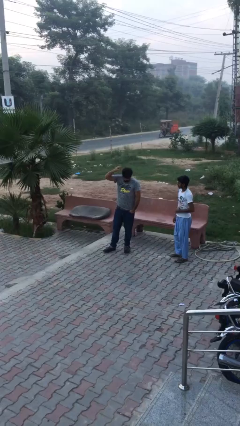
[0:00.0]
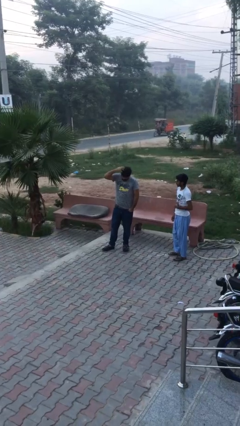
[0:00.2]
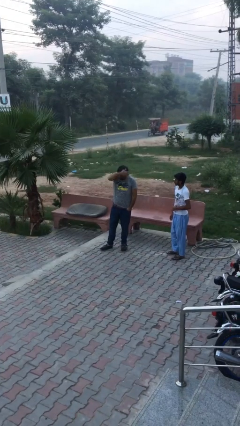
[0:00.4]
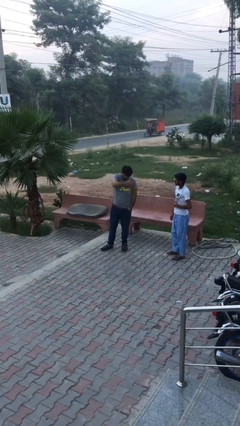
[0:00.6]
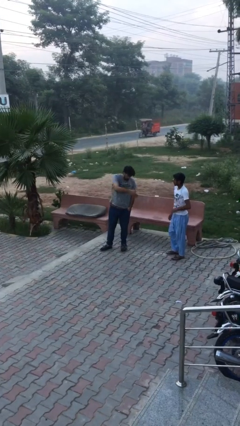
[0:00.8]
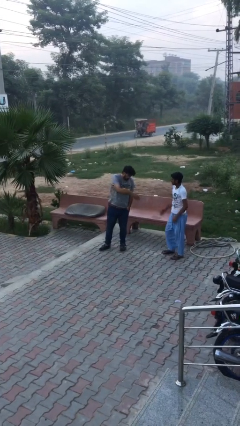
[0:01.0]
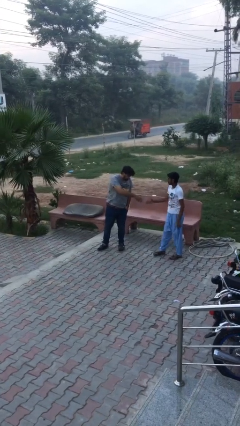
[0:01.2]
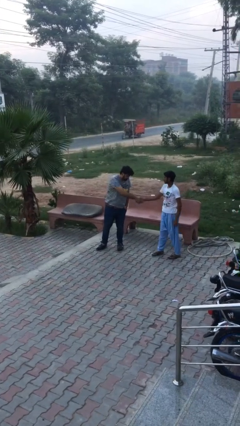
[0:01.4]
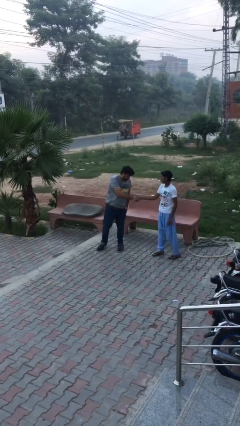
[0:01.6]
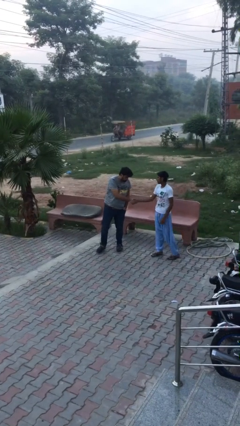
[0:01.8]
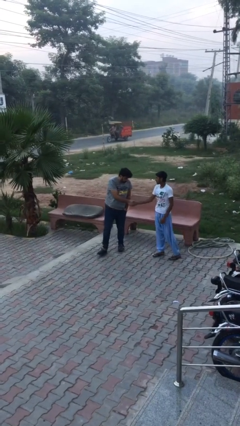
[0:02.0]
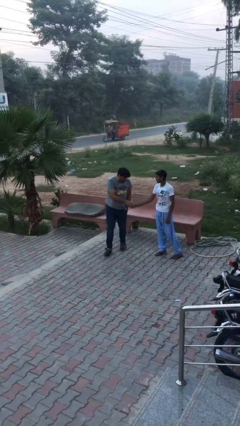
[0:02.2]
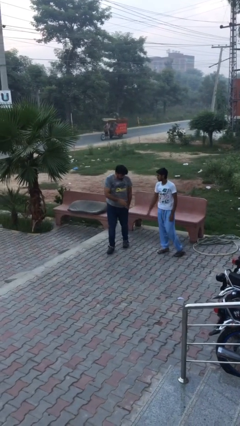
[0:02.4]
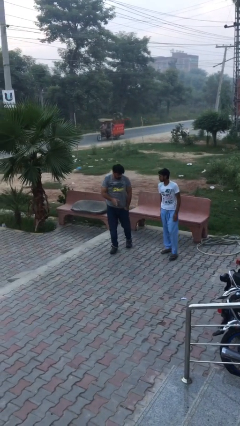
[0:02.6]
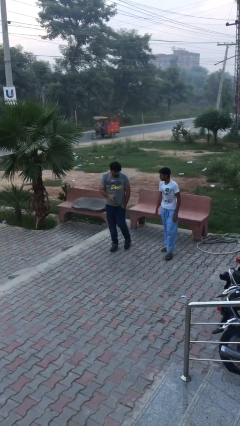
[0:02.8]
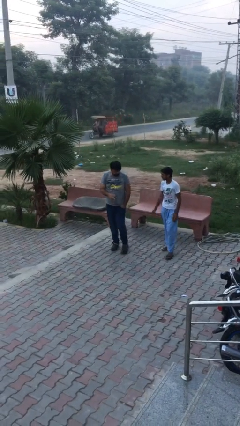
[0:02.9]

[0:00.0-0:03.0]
person shakes hand

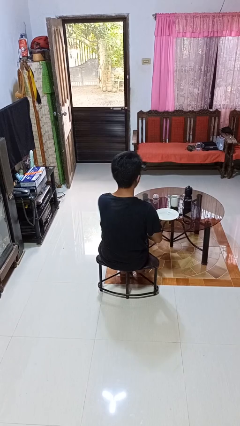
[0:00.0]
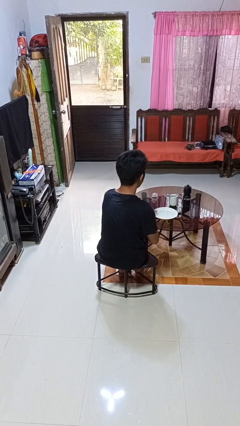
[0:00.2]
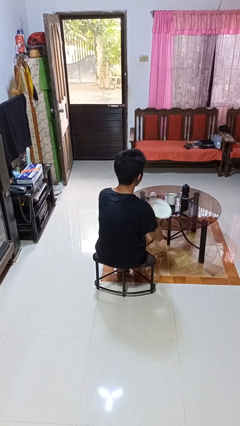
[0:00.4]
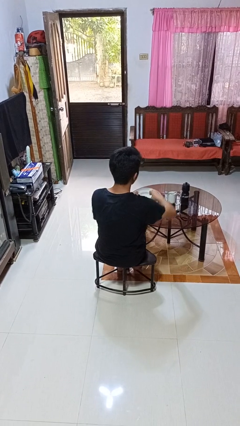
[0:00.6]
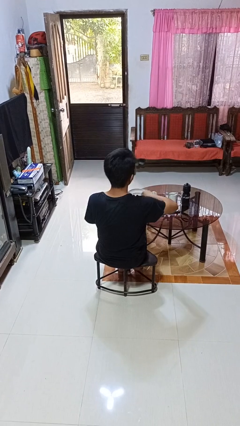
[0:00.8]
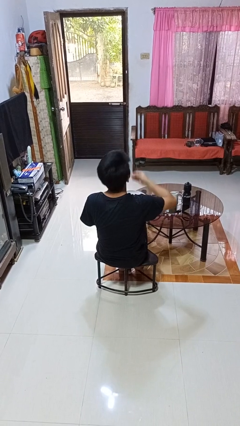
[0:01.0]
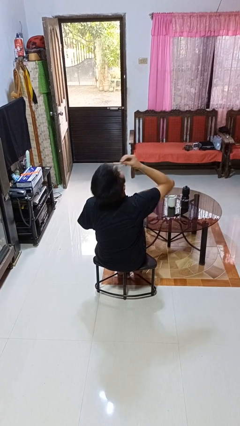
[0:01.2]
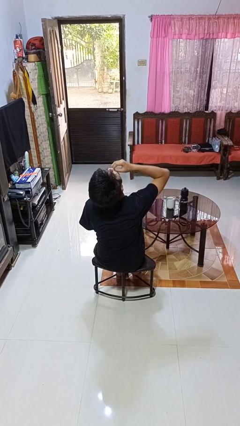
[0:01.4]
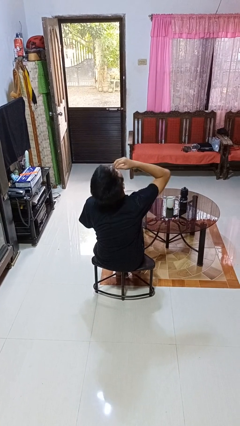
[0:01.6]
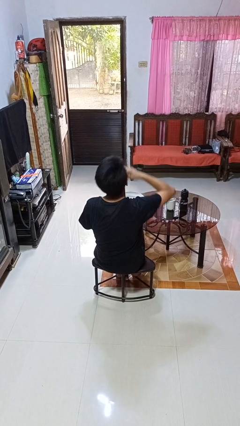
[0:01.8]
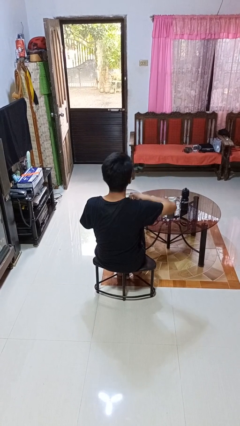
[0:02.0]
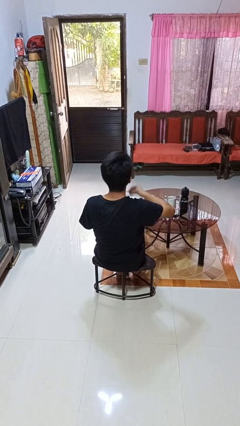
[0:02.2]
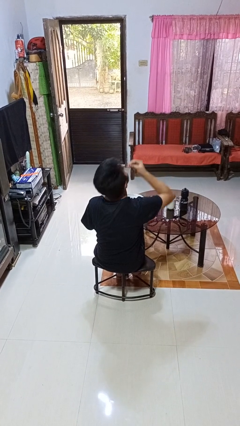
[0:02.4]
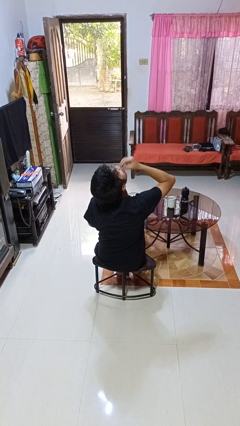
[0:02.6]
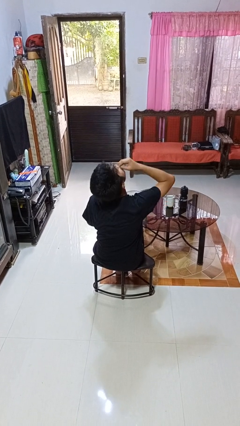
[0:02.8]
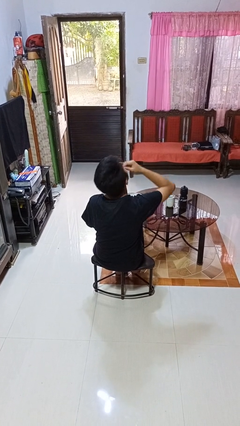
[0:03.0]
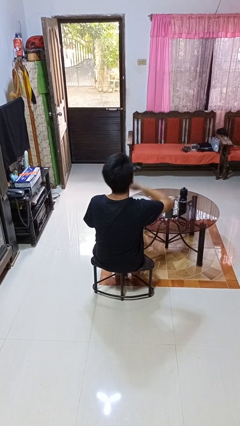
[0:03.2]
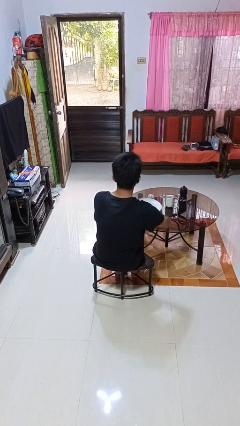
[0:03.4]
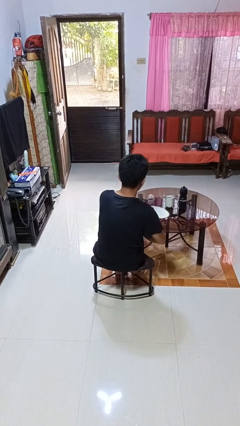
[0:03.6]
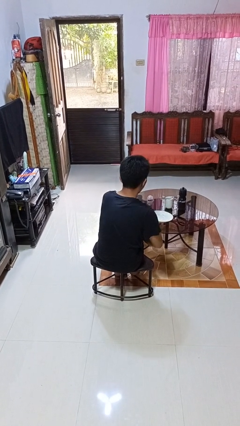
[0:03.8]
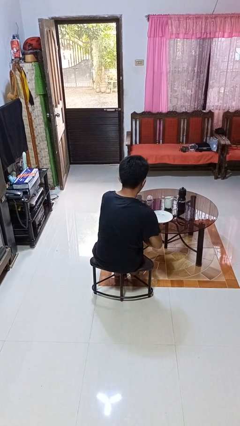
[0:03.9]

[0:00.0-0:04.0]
person eats with hands

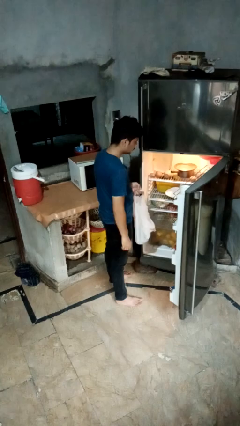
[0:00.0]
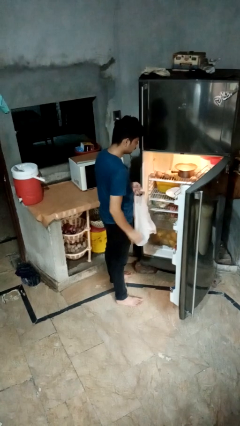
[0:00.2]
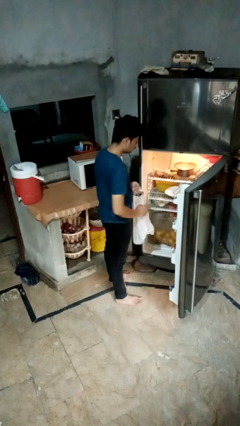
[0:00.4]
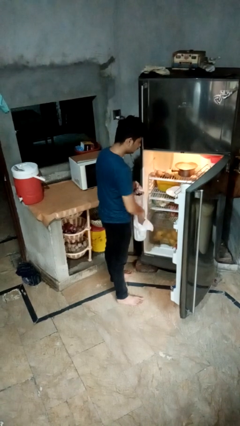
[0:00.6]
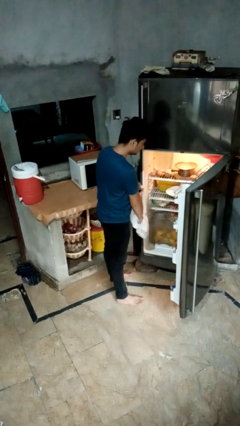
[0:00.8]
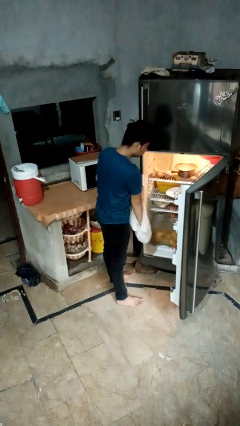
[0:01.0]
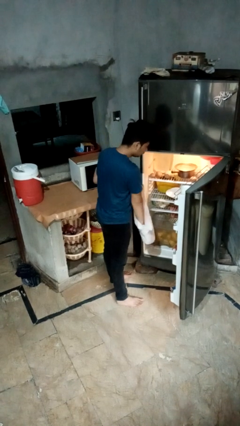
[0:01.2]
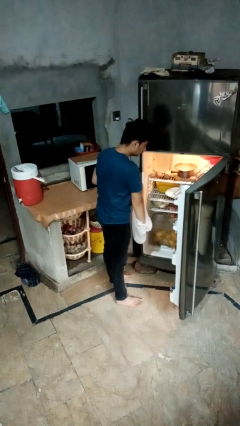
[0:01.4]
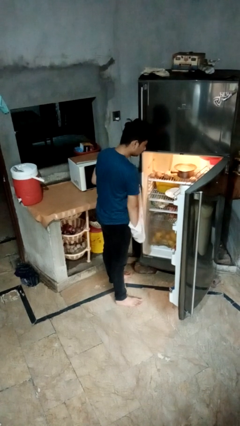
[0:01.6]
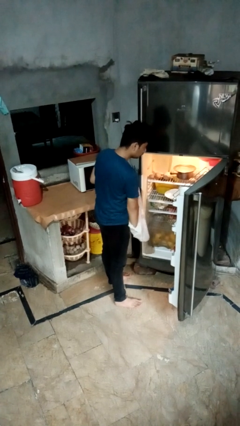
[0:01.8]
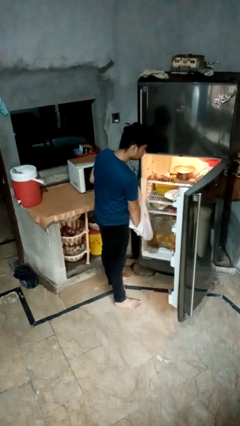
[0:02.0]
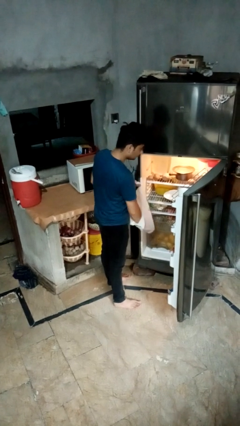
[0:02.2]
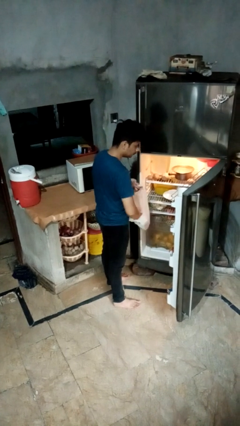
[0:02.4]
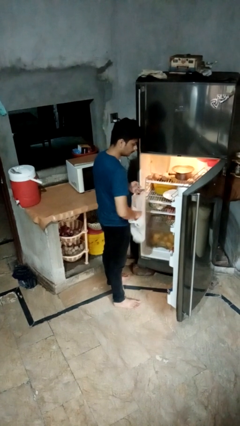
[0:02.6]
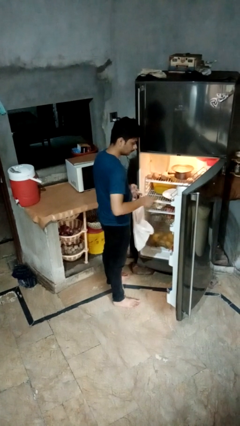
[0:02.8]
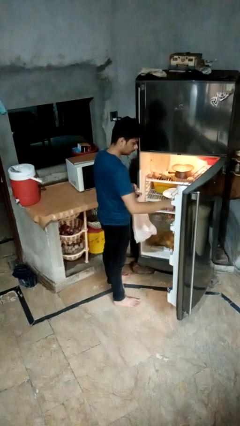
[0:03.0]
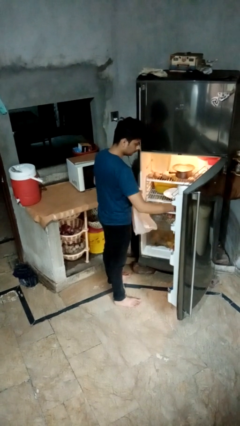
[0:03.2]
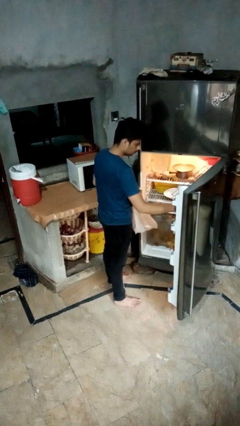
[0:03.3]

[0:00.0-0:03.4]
person loads groceries into refrigerator

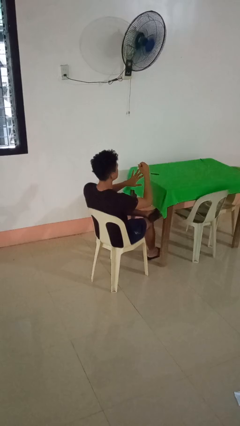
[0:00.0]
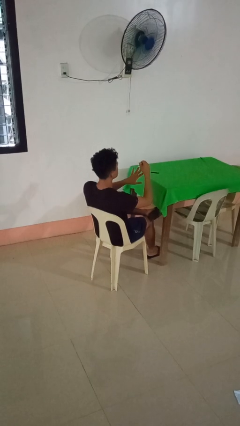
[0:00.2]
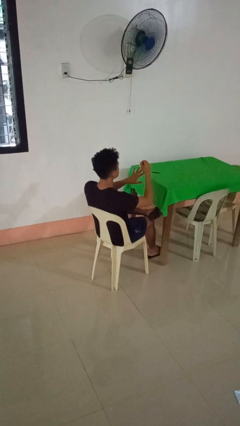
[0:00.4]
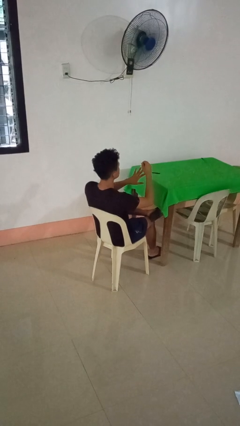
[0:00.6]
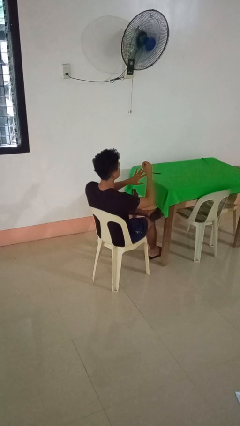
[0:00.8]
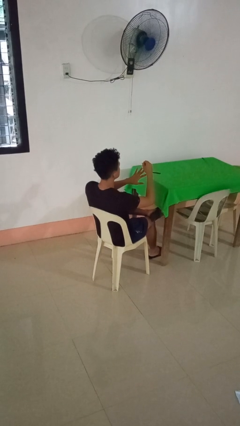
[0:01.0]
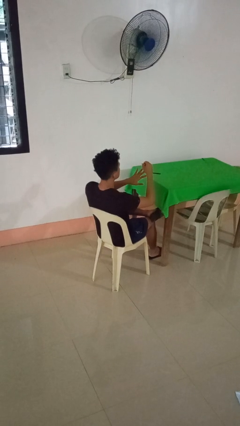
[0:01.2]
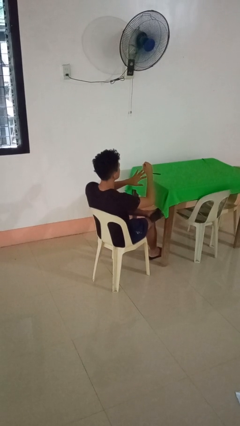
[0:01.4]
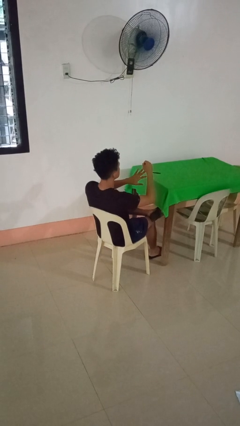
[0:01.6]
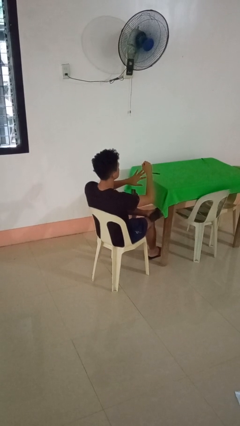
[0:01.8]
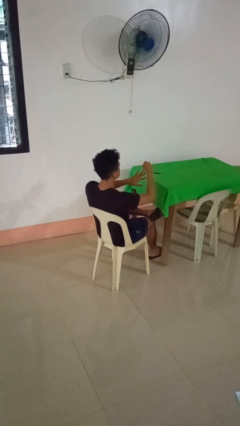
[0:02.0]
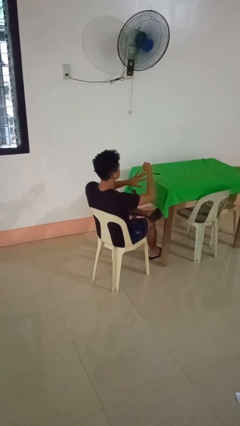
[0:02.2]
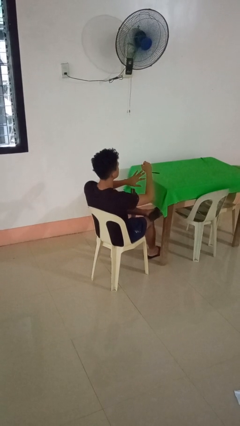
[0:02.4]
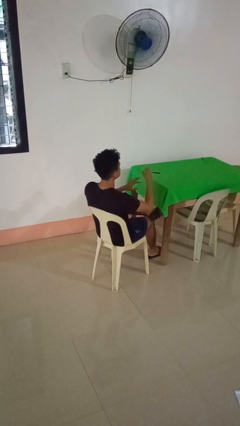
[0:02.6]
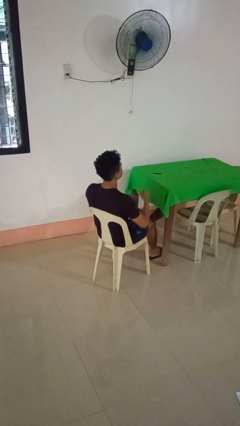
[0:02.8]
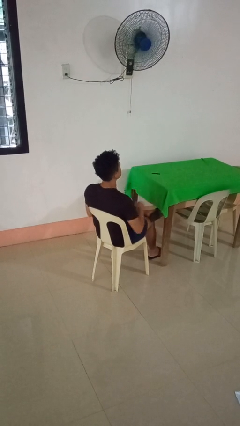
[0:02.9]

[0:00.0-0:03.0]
person clips fingernails

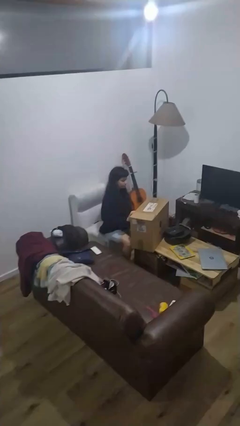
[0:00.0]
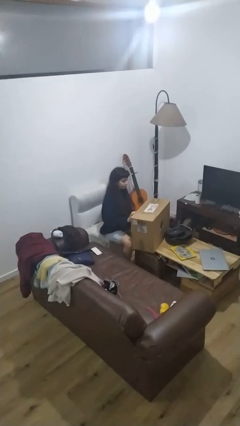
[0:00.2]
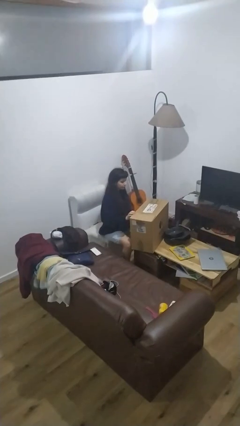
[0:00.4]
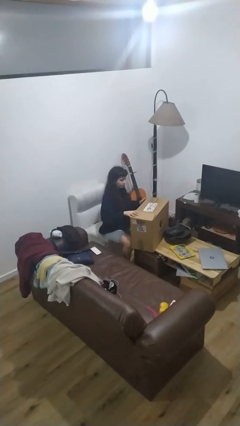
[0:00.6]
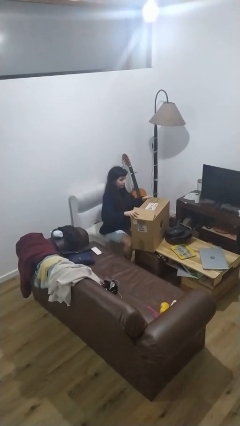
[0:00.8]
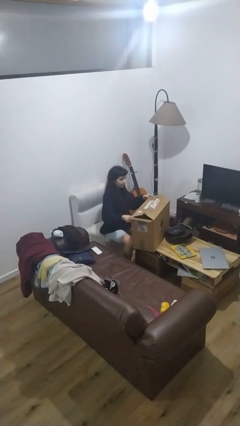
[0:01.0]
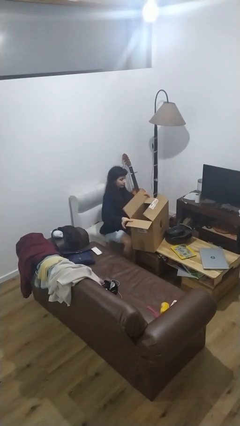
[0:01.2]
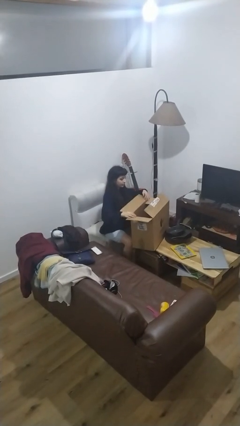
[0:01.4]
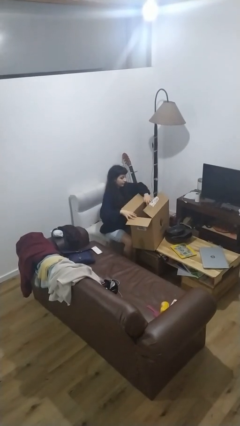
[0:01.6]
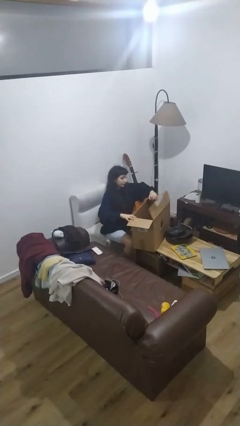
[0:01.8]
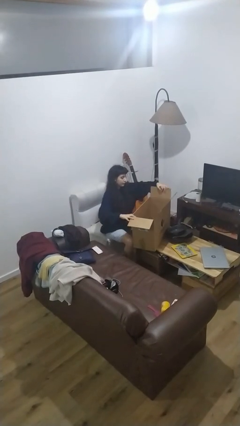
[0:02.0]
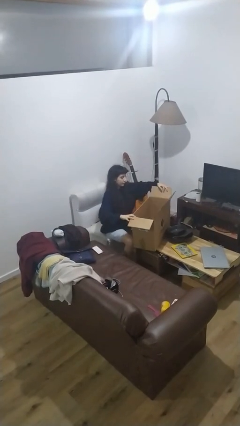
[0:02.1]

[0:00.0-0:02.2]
person opens box

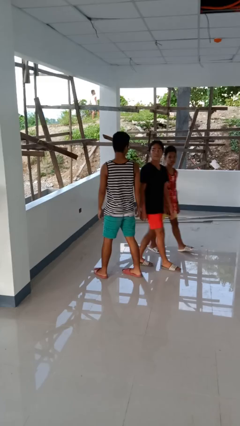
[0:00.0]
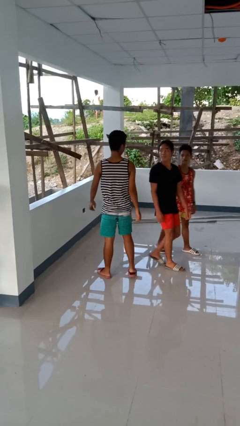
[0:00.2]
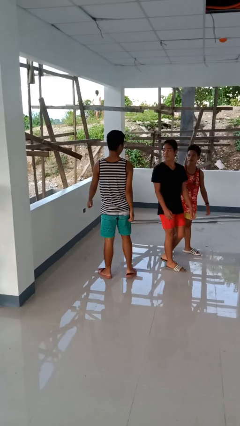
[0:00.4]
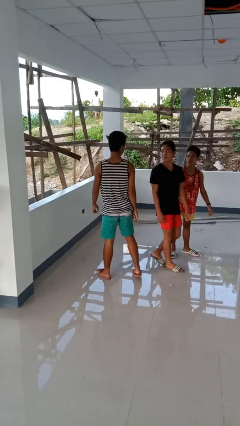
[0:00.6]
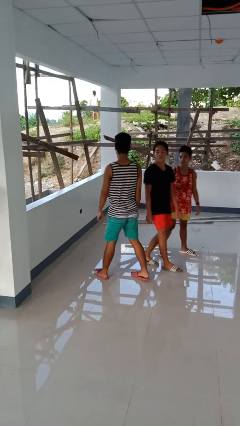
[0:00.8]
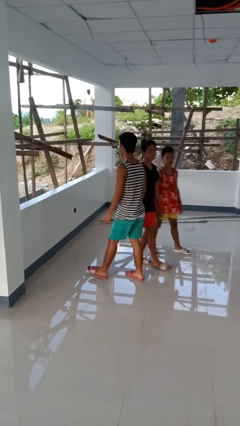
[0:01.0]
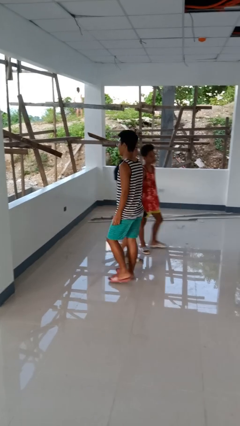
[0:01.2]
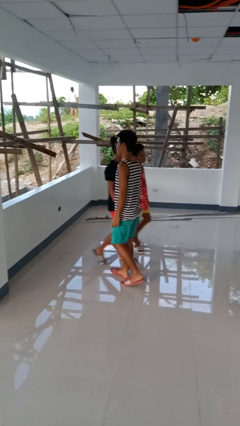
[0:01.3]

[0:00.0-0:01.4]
person bumps into person

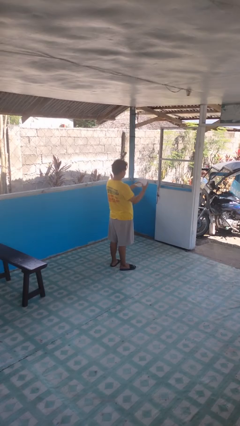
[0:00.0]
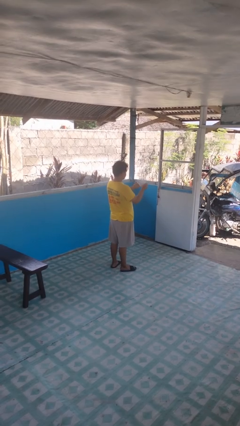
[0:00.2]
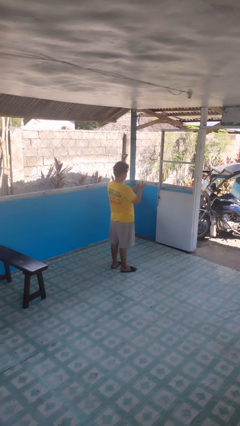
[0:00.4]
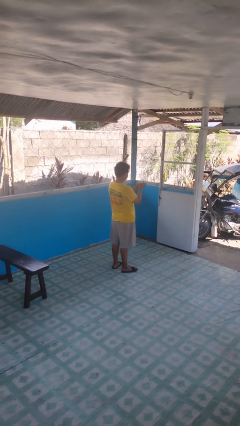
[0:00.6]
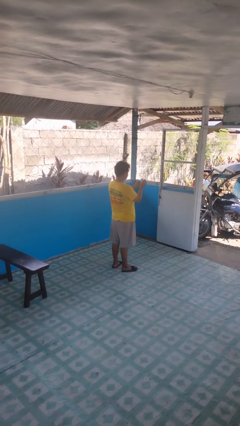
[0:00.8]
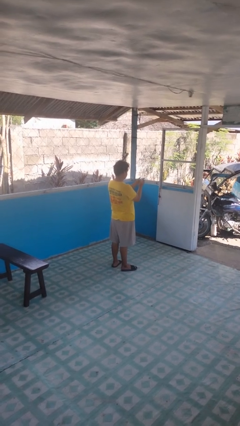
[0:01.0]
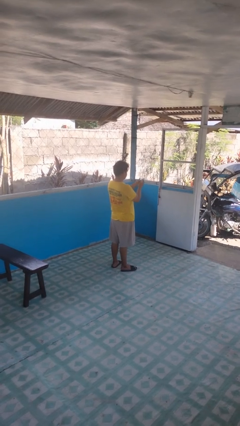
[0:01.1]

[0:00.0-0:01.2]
person crumples paper
